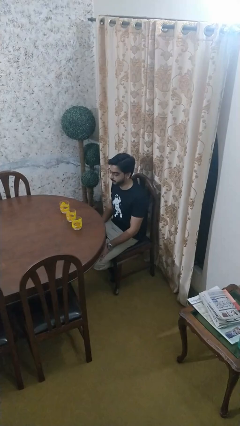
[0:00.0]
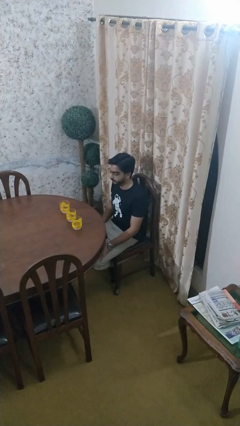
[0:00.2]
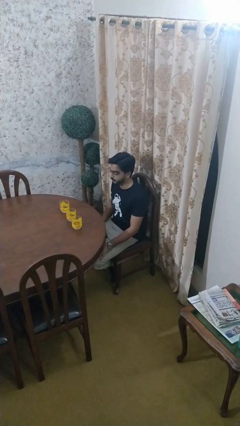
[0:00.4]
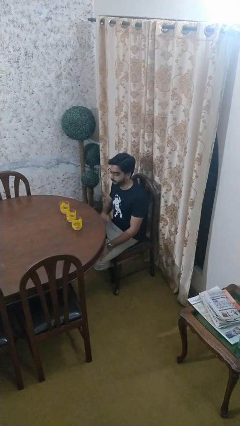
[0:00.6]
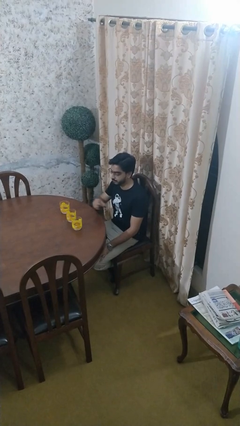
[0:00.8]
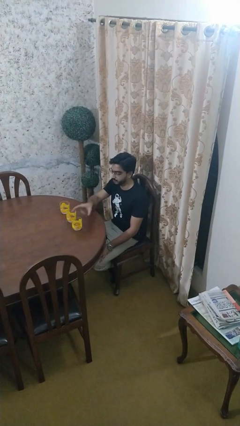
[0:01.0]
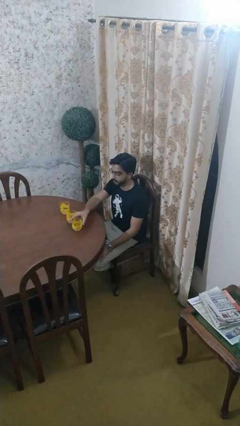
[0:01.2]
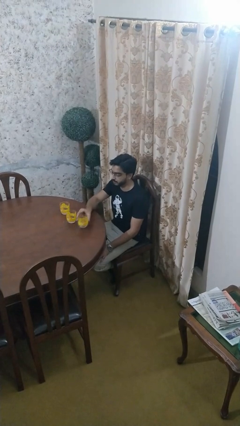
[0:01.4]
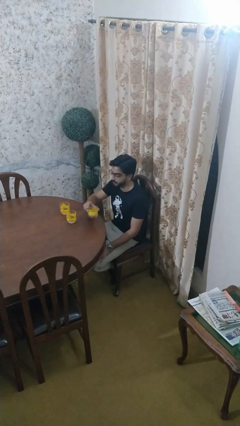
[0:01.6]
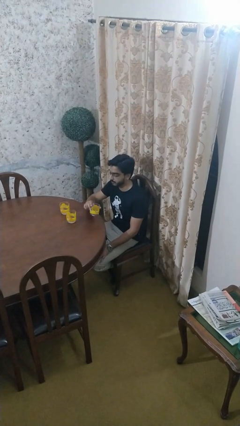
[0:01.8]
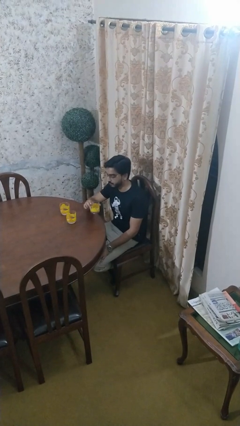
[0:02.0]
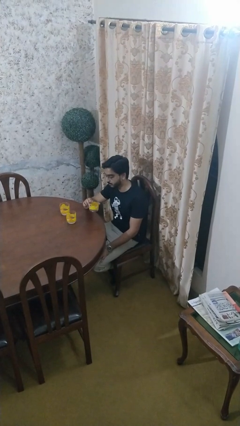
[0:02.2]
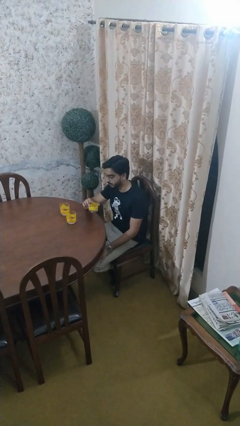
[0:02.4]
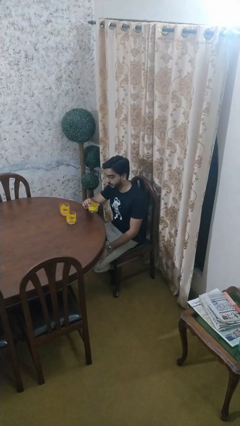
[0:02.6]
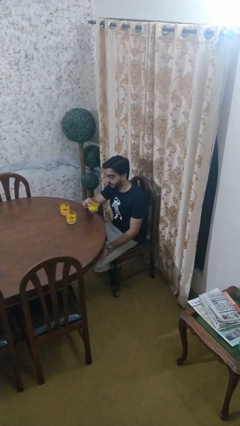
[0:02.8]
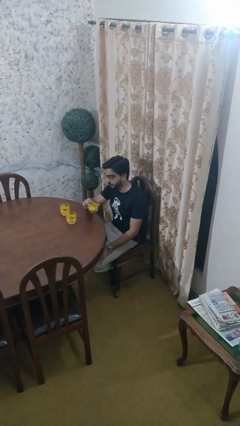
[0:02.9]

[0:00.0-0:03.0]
person picks up object from table

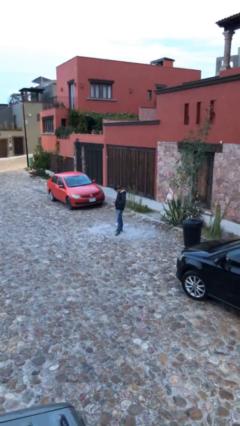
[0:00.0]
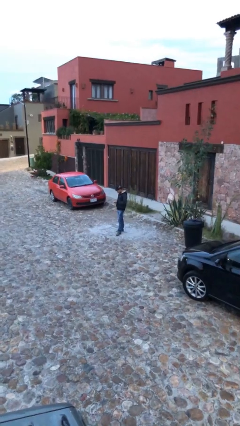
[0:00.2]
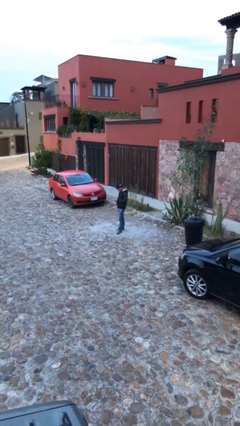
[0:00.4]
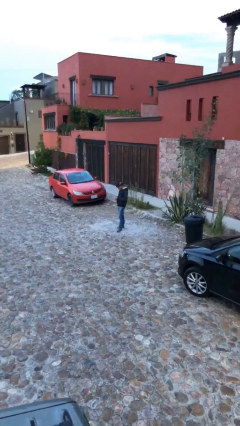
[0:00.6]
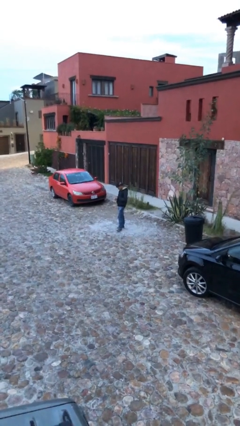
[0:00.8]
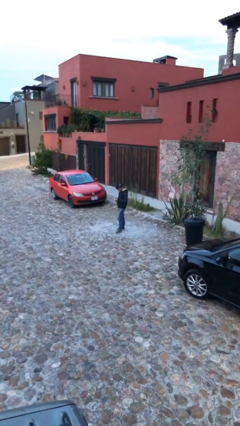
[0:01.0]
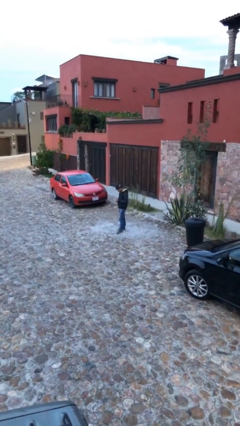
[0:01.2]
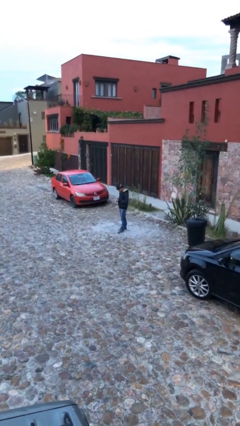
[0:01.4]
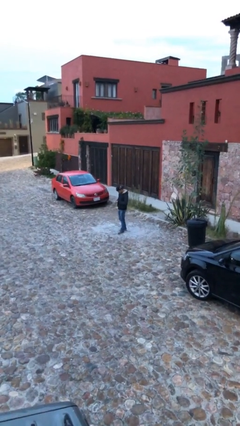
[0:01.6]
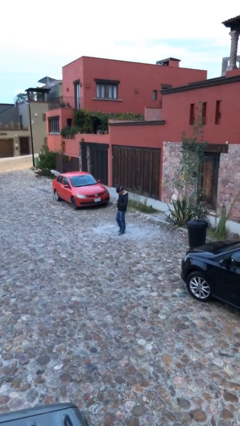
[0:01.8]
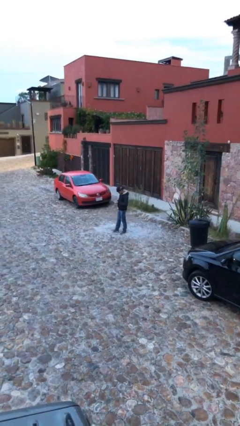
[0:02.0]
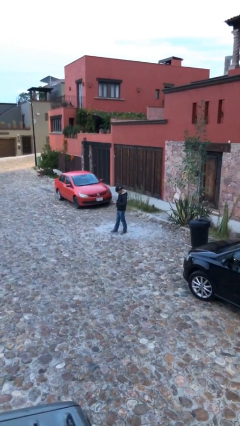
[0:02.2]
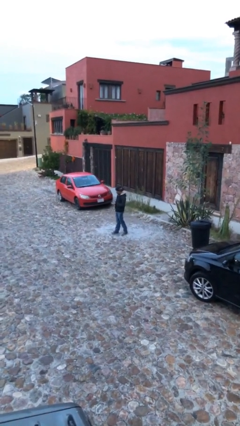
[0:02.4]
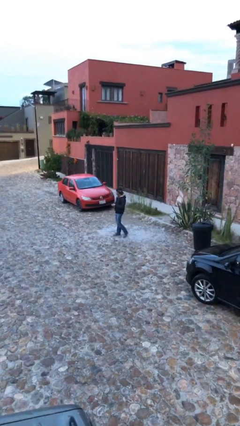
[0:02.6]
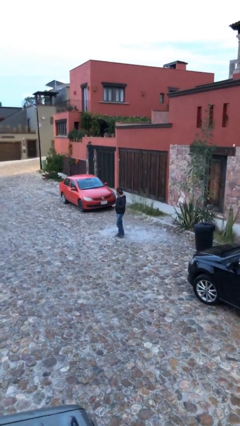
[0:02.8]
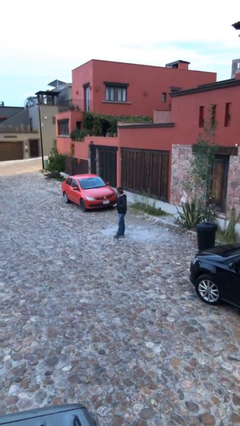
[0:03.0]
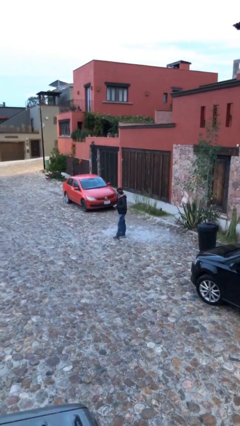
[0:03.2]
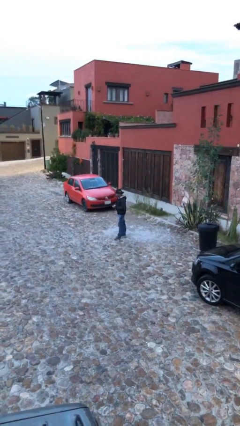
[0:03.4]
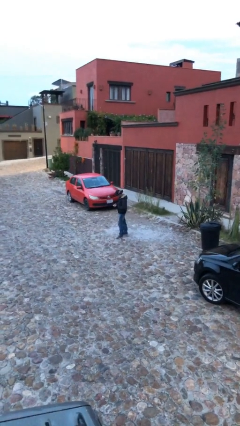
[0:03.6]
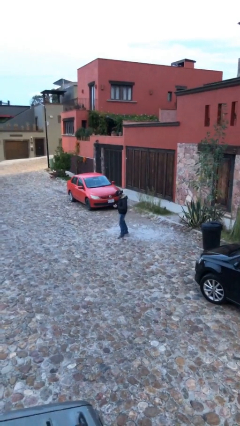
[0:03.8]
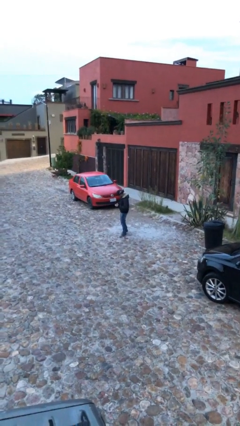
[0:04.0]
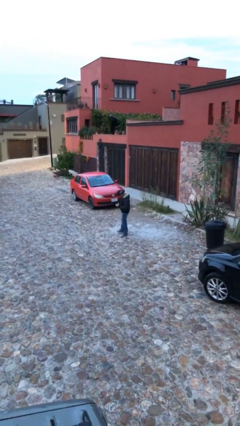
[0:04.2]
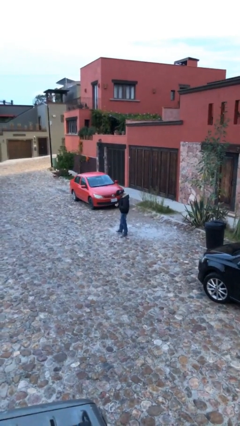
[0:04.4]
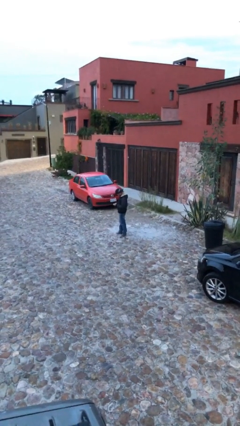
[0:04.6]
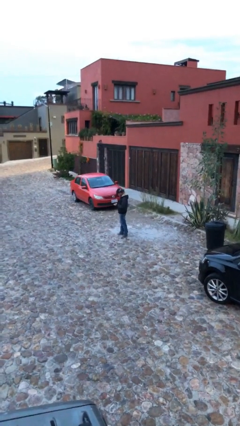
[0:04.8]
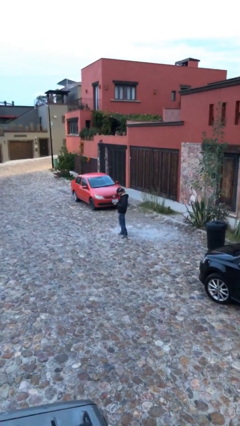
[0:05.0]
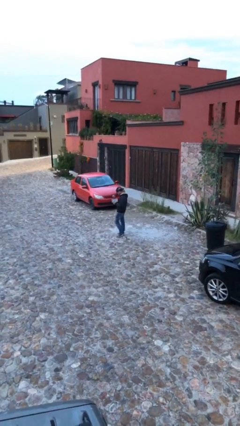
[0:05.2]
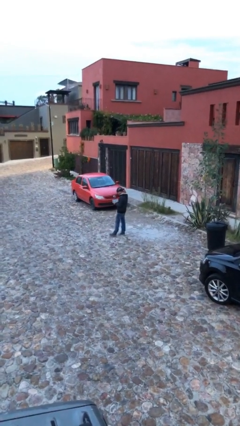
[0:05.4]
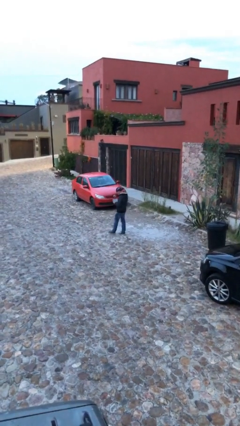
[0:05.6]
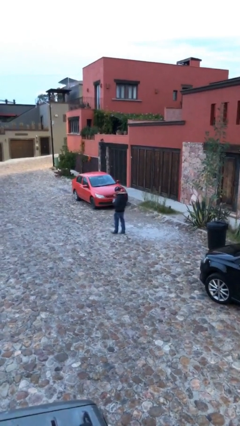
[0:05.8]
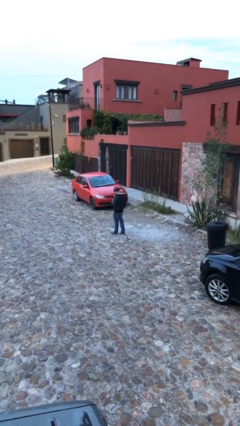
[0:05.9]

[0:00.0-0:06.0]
person texts on phone

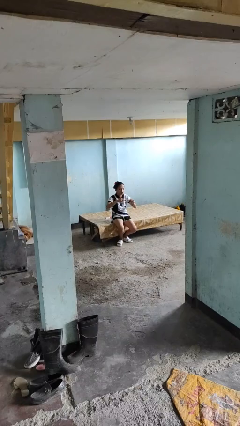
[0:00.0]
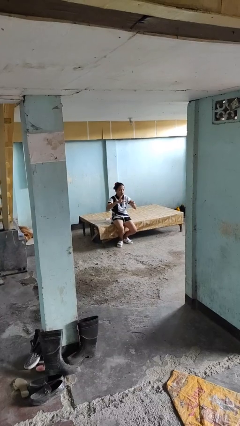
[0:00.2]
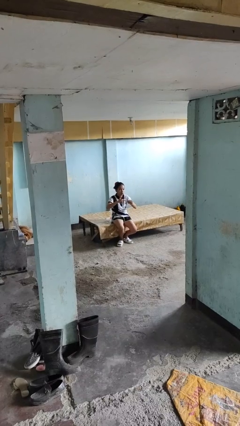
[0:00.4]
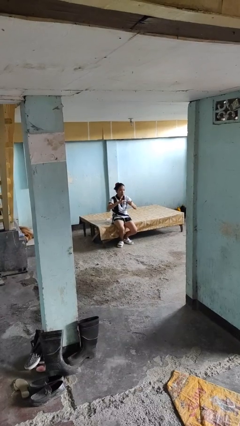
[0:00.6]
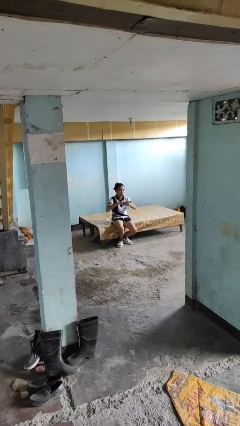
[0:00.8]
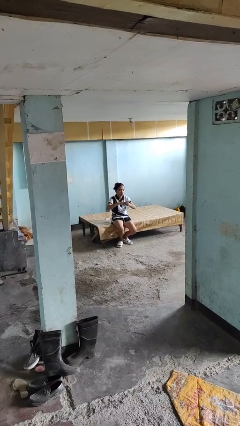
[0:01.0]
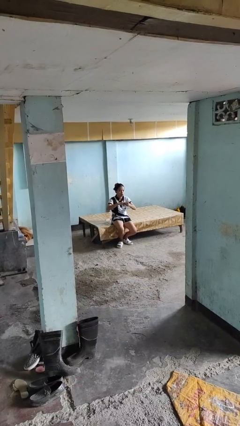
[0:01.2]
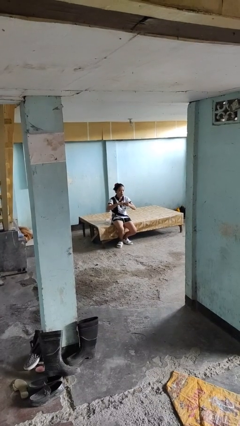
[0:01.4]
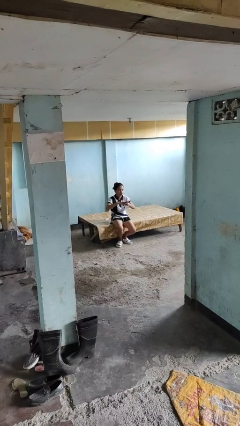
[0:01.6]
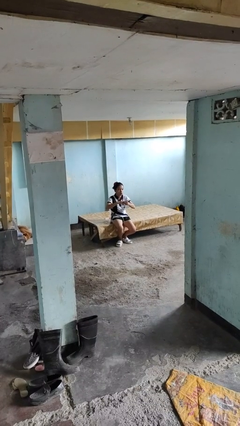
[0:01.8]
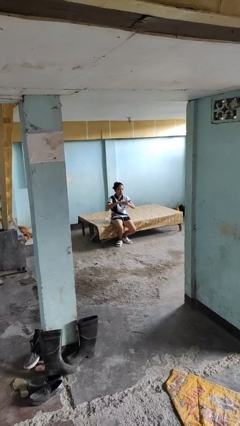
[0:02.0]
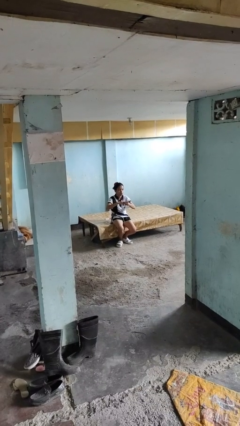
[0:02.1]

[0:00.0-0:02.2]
person puts on ring

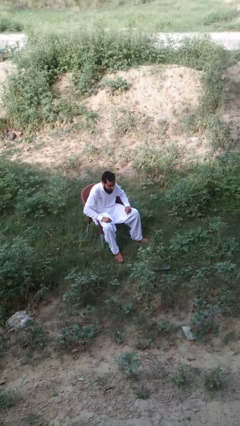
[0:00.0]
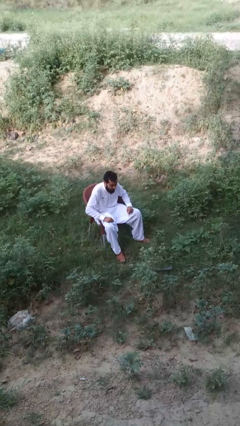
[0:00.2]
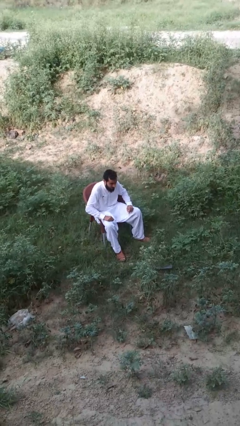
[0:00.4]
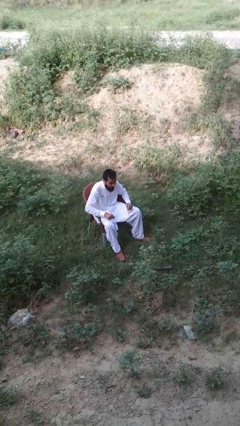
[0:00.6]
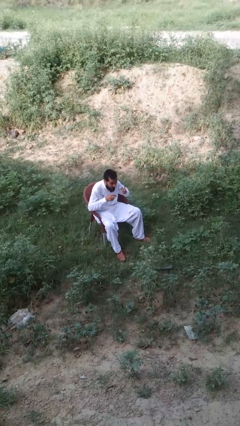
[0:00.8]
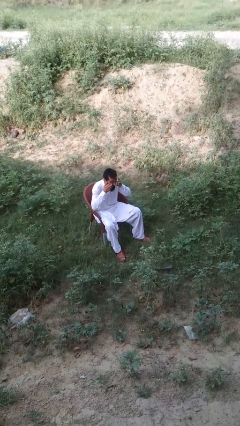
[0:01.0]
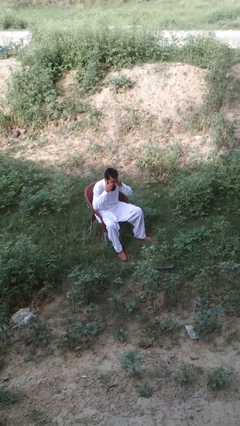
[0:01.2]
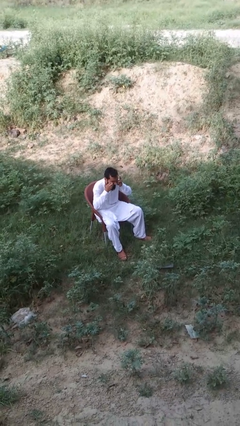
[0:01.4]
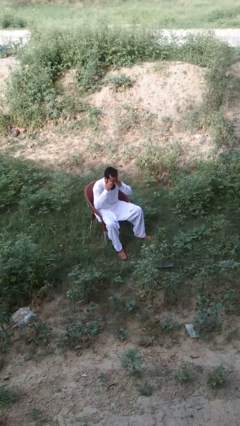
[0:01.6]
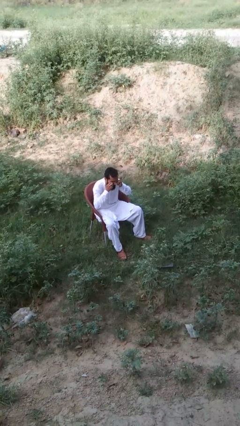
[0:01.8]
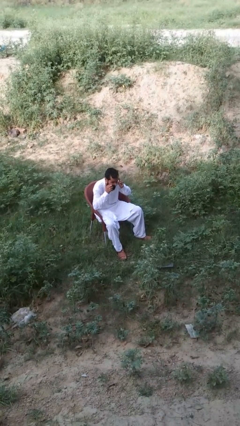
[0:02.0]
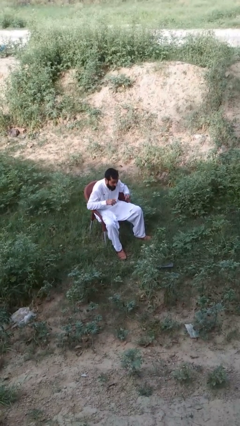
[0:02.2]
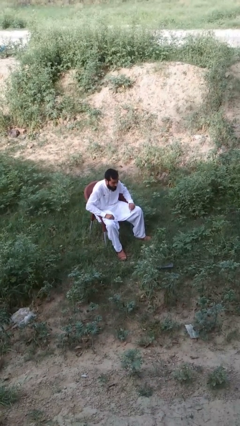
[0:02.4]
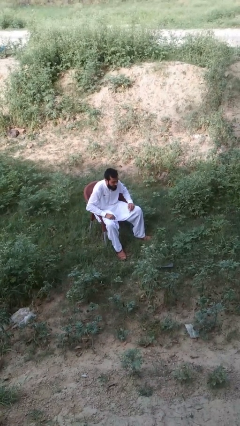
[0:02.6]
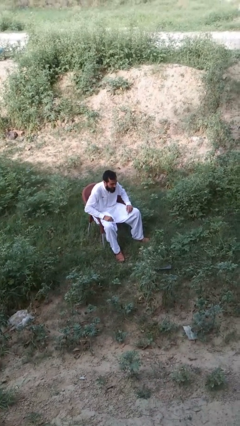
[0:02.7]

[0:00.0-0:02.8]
person rubs eyes

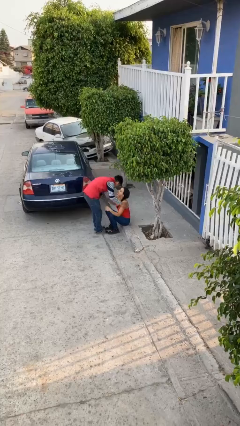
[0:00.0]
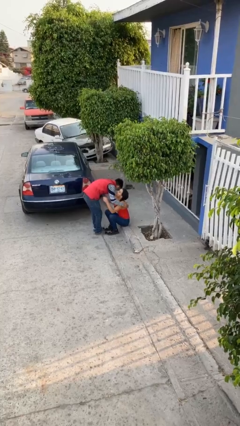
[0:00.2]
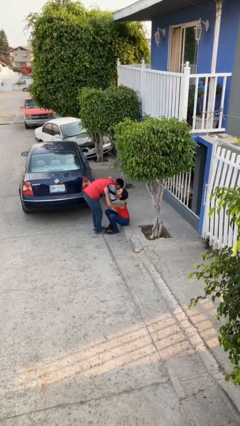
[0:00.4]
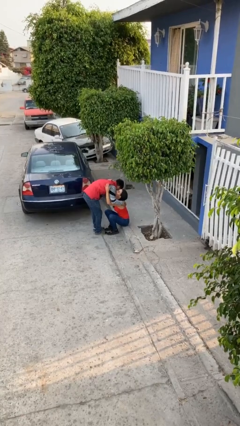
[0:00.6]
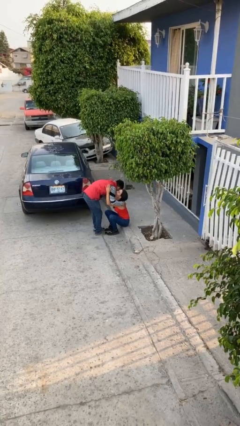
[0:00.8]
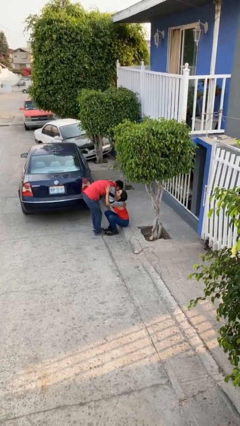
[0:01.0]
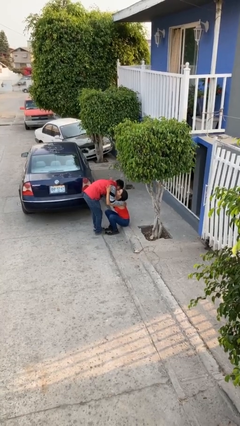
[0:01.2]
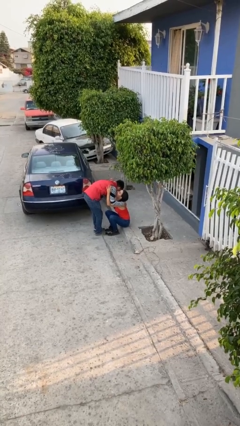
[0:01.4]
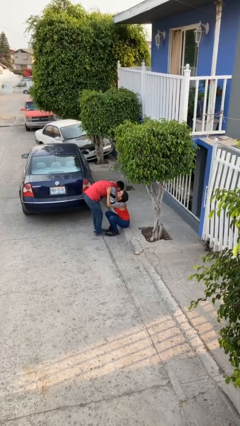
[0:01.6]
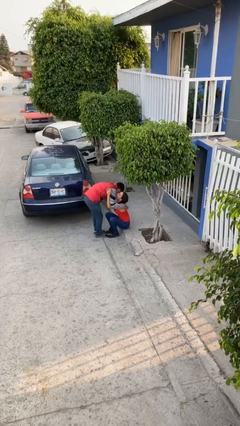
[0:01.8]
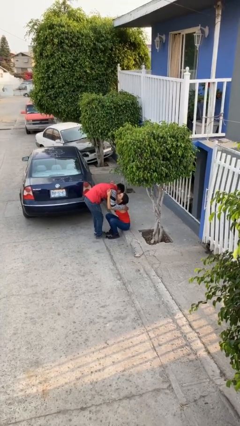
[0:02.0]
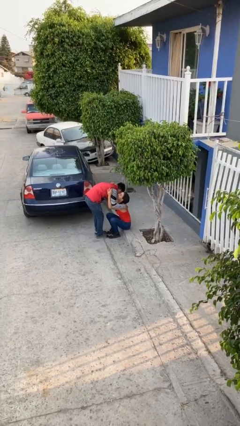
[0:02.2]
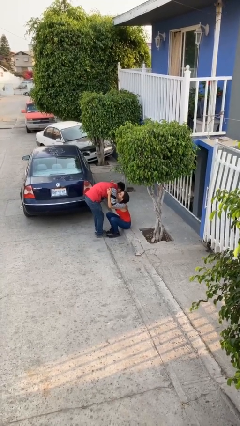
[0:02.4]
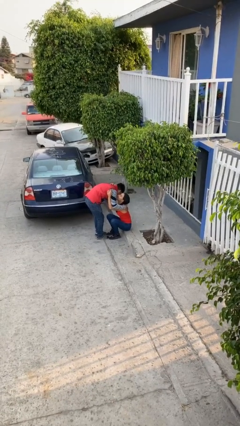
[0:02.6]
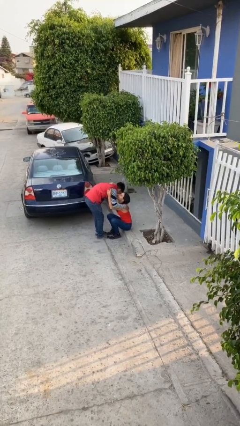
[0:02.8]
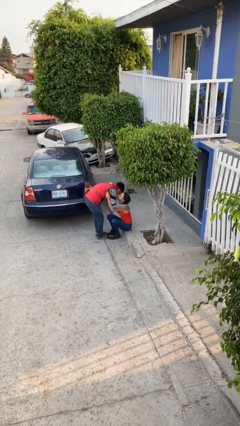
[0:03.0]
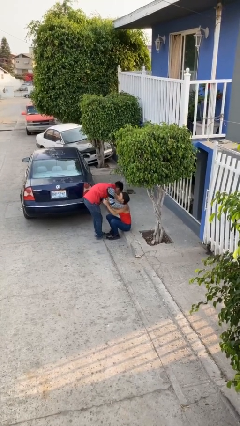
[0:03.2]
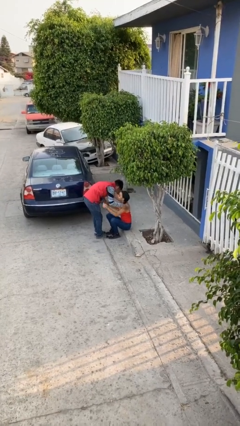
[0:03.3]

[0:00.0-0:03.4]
person embraces person

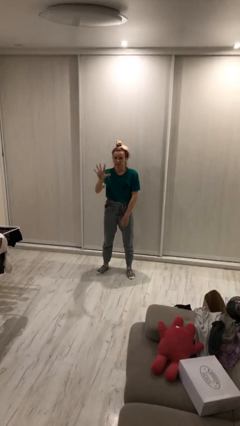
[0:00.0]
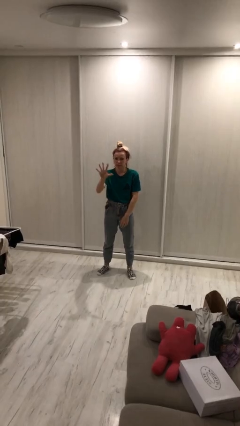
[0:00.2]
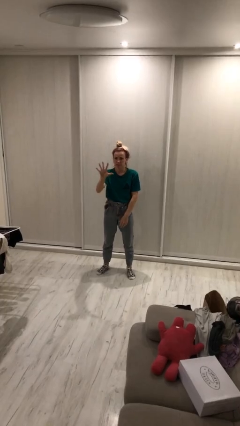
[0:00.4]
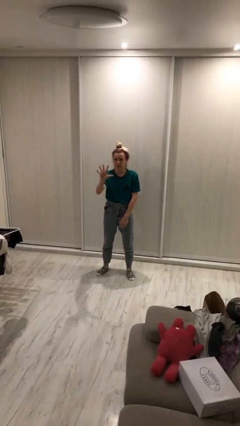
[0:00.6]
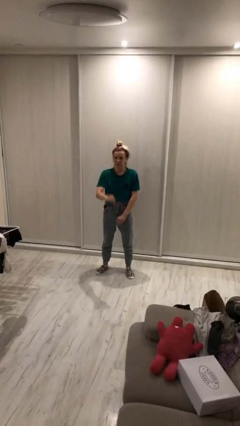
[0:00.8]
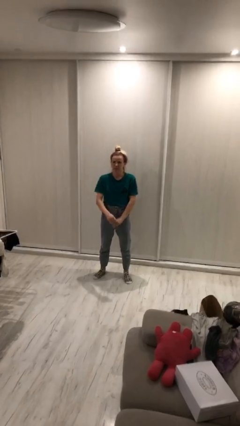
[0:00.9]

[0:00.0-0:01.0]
person gestures number five
